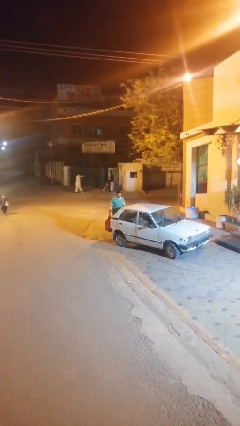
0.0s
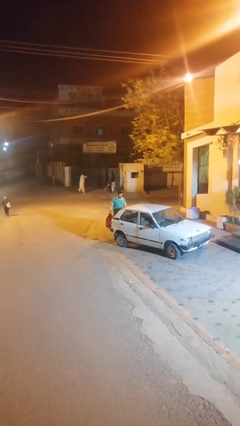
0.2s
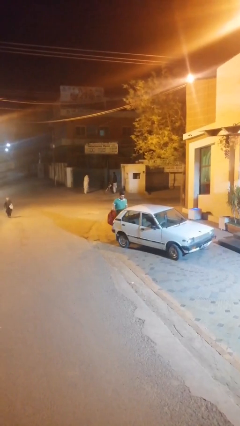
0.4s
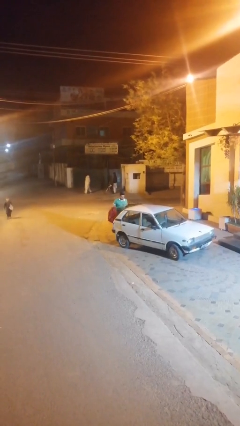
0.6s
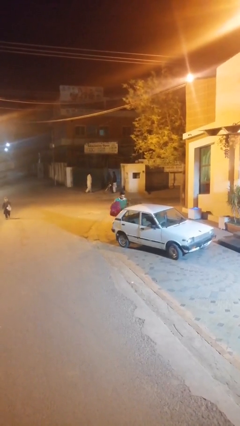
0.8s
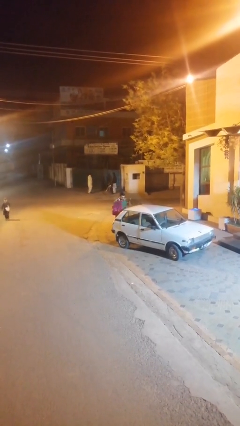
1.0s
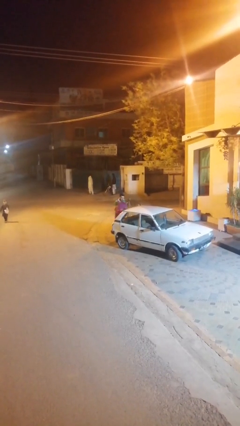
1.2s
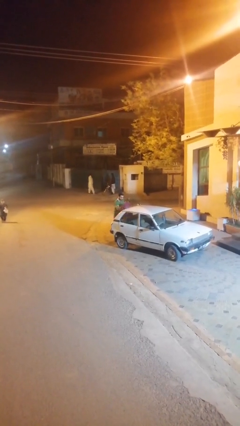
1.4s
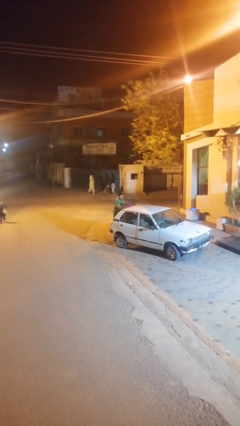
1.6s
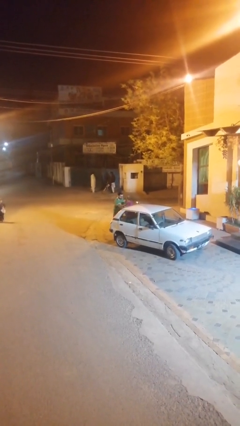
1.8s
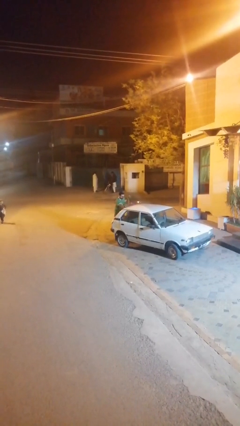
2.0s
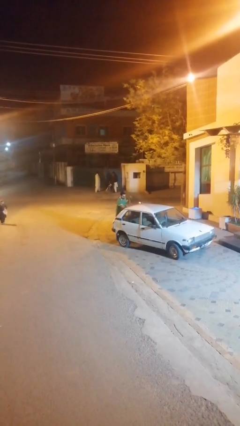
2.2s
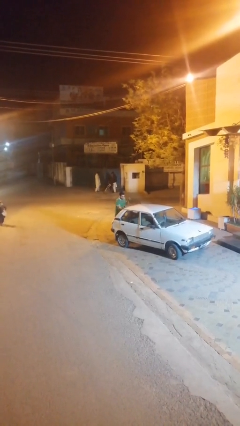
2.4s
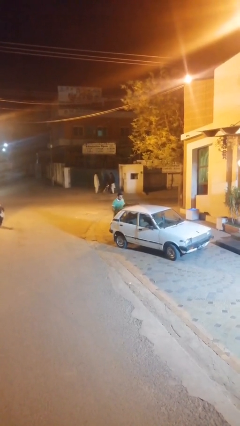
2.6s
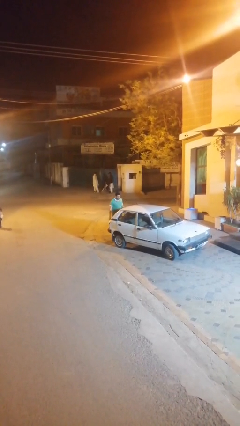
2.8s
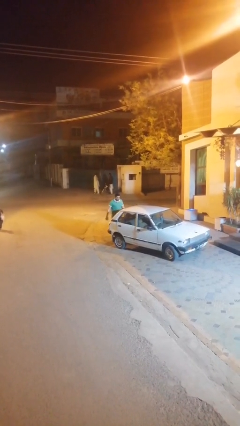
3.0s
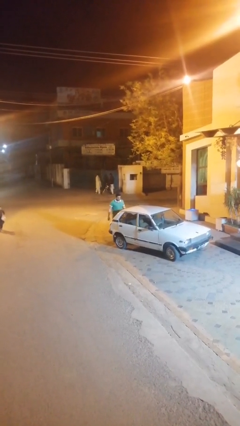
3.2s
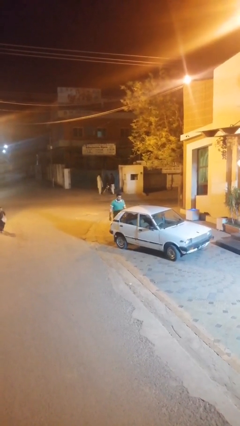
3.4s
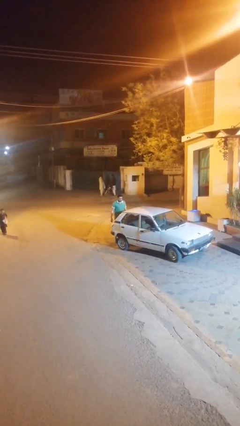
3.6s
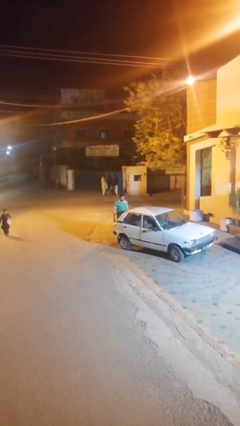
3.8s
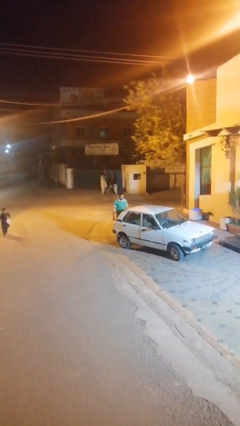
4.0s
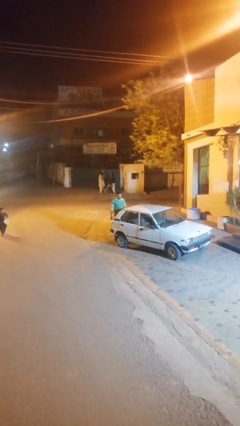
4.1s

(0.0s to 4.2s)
person loads car

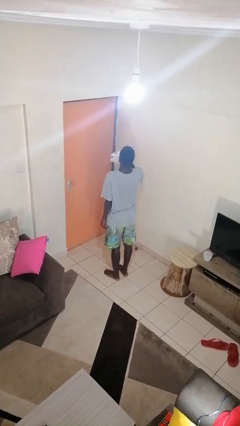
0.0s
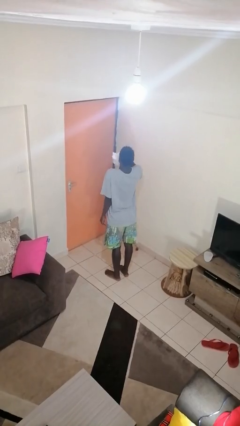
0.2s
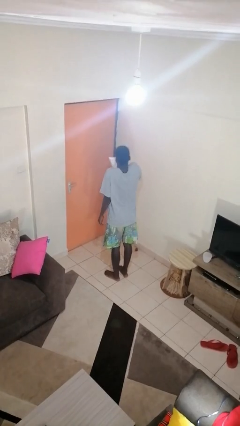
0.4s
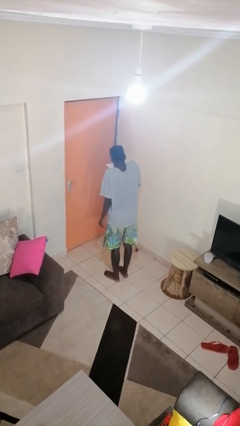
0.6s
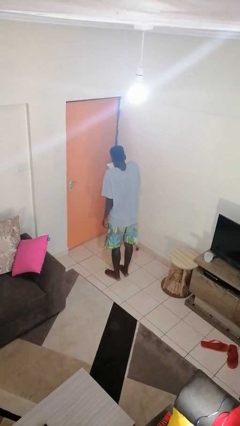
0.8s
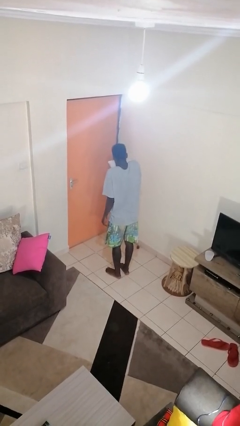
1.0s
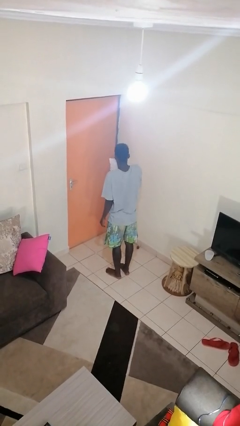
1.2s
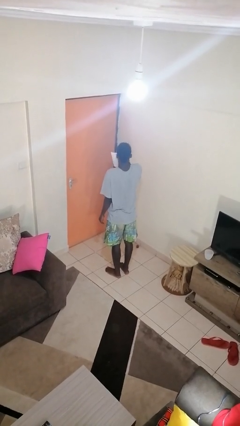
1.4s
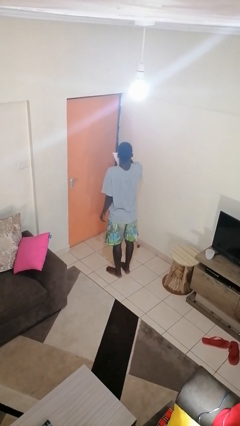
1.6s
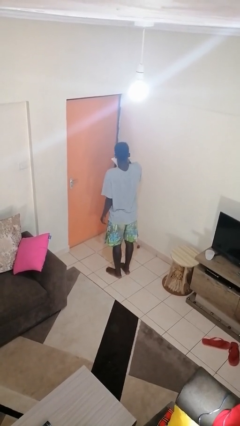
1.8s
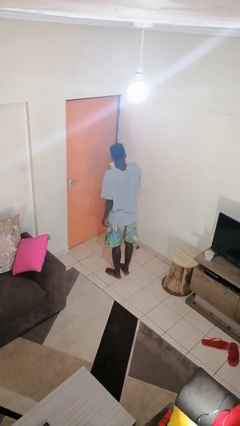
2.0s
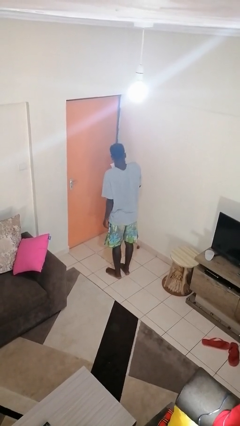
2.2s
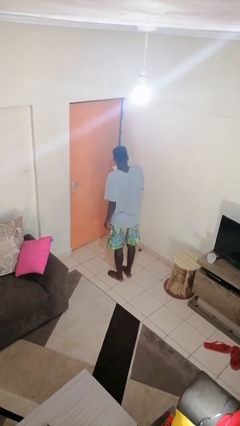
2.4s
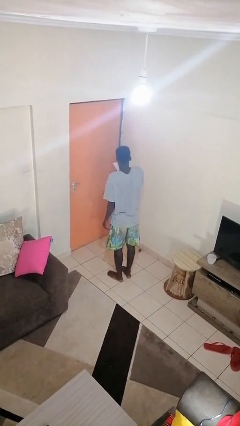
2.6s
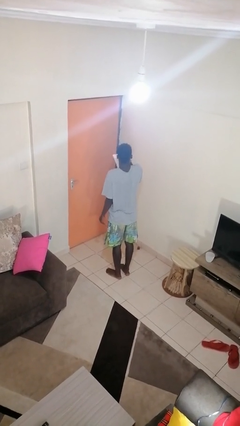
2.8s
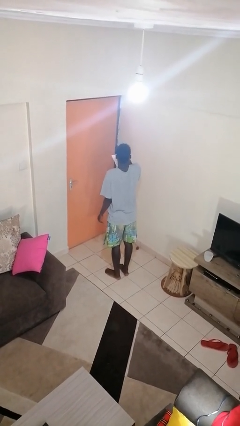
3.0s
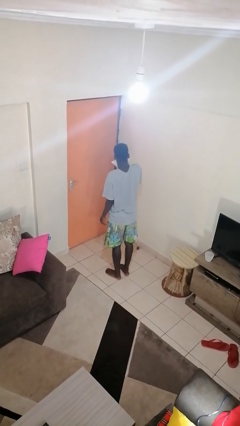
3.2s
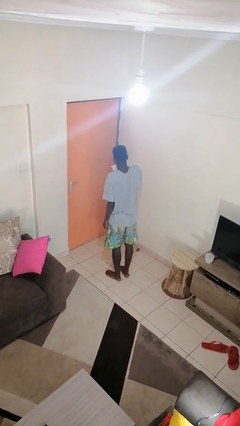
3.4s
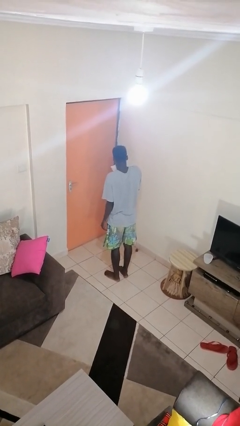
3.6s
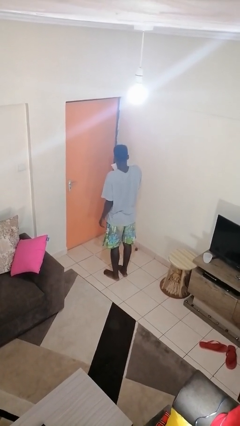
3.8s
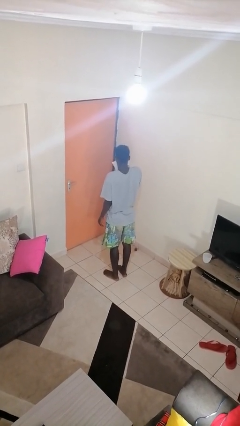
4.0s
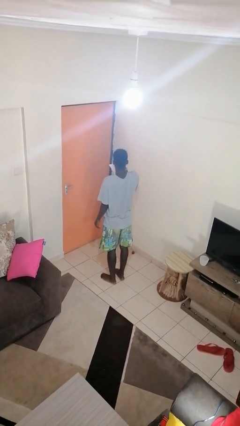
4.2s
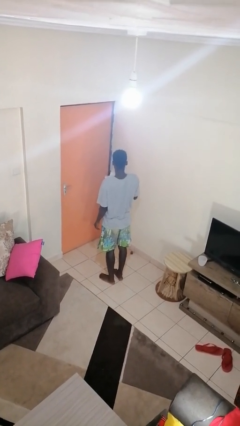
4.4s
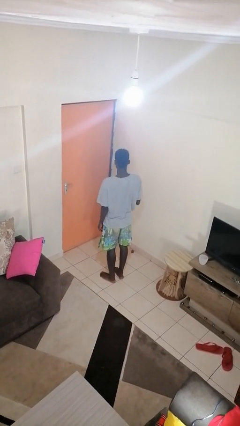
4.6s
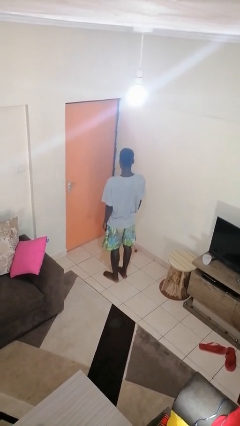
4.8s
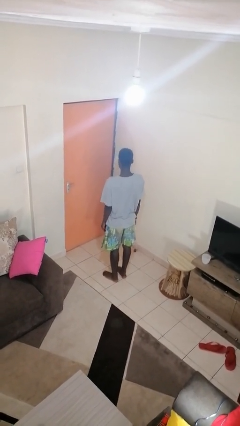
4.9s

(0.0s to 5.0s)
person blows nose

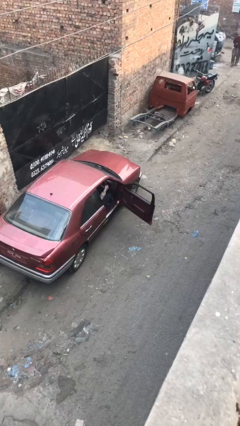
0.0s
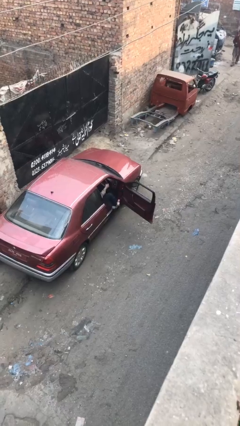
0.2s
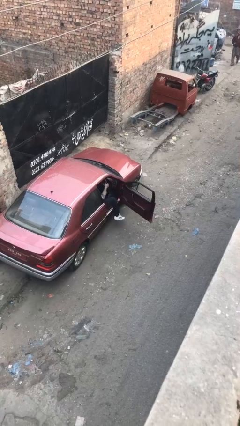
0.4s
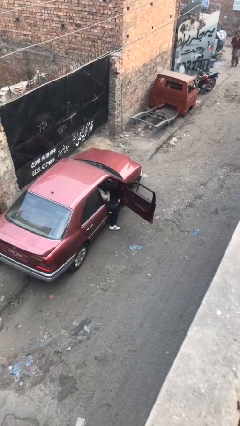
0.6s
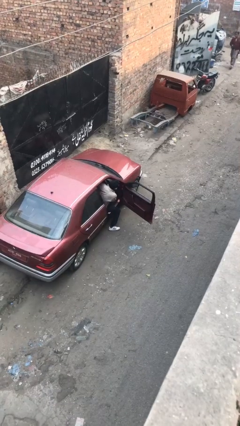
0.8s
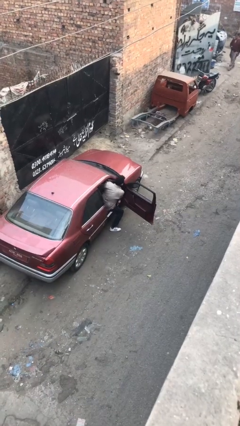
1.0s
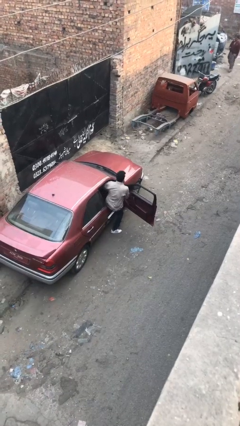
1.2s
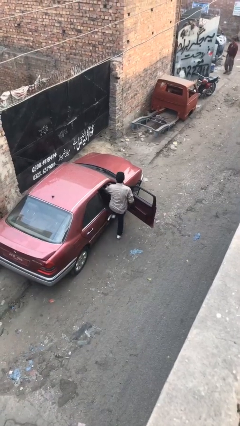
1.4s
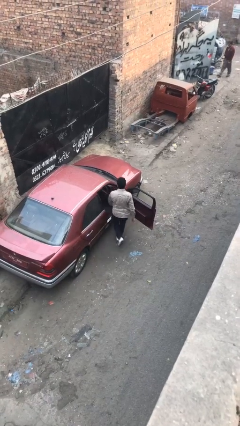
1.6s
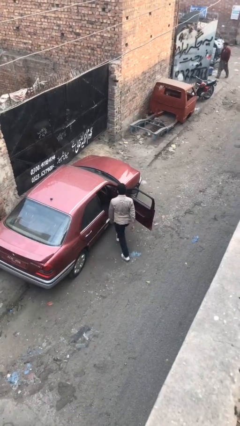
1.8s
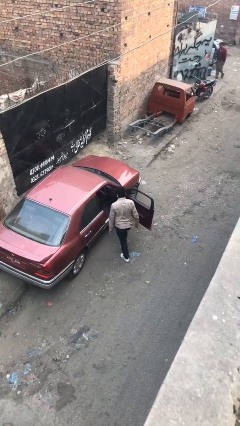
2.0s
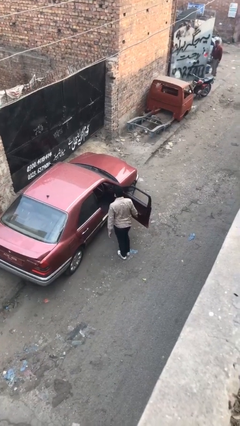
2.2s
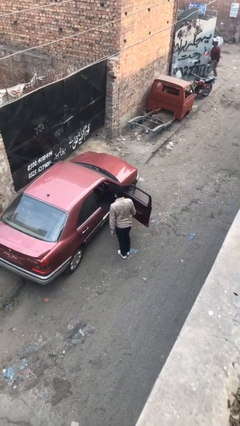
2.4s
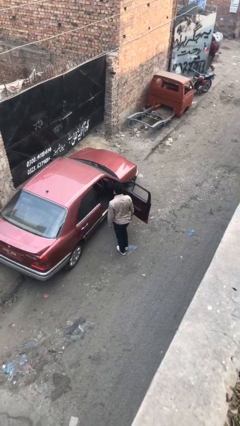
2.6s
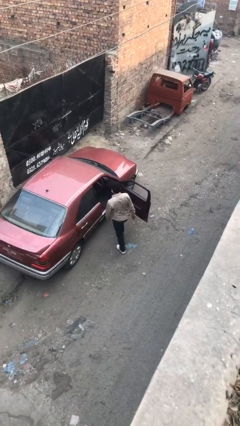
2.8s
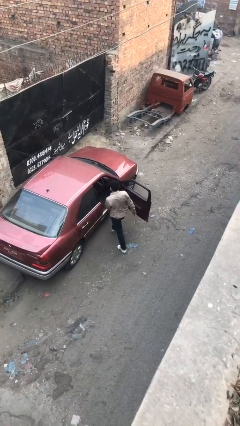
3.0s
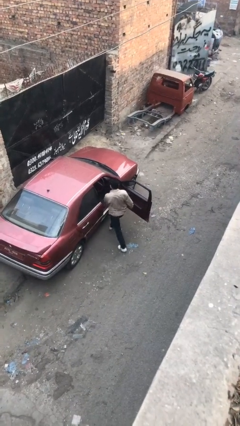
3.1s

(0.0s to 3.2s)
person exits car

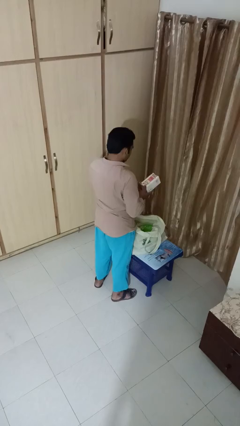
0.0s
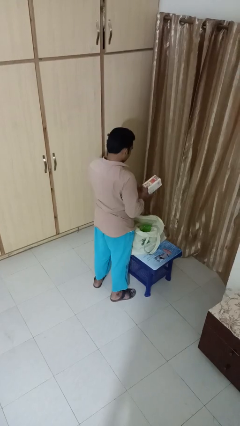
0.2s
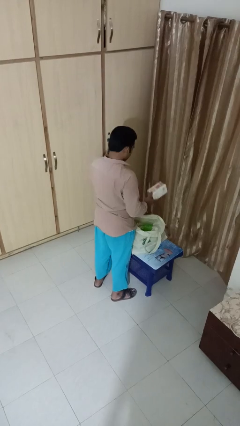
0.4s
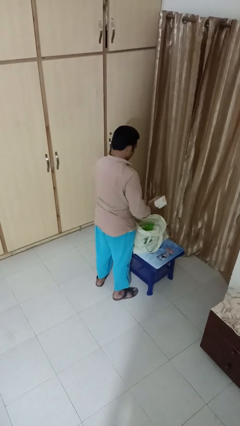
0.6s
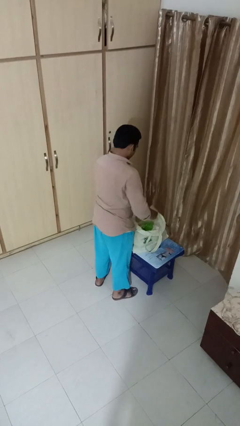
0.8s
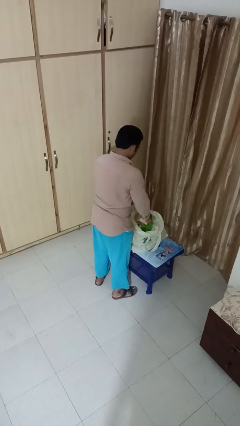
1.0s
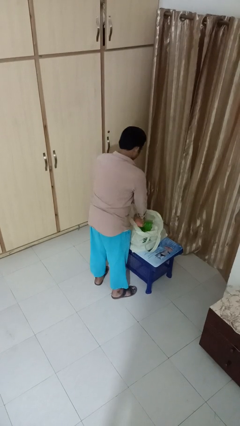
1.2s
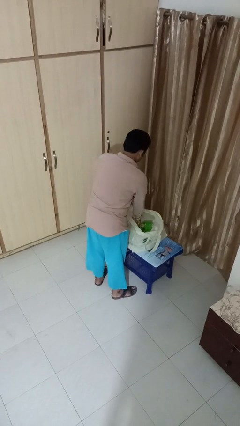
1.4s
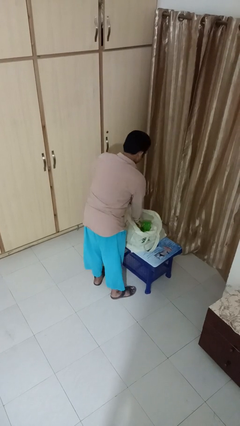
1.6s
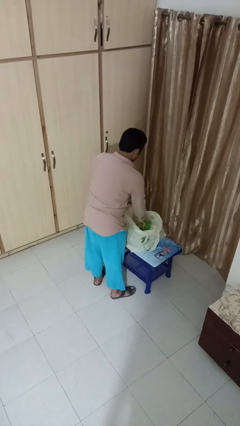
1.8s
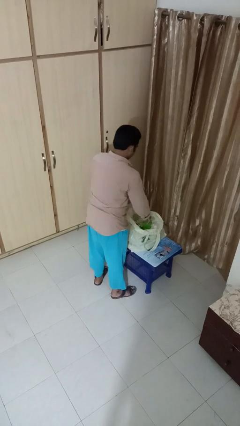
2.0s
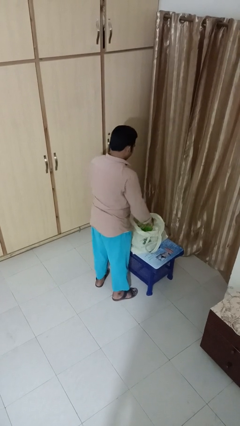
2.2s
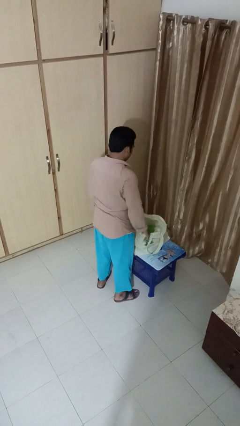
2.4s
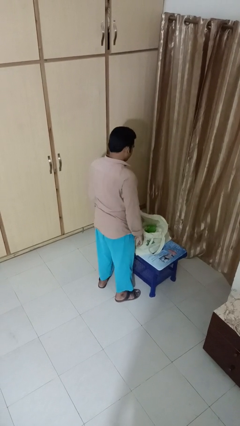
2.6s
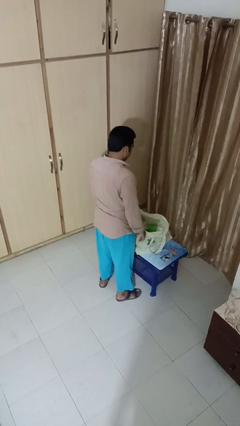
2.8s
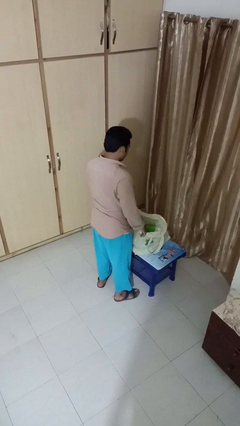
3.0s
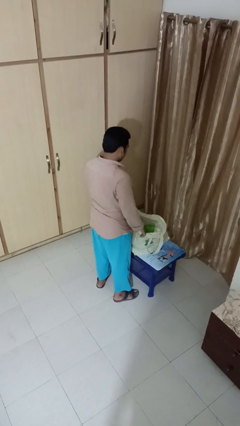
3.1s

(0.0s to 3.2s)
person puts object into bag

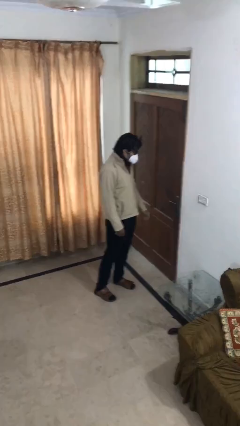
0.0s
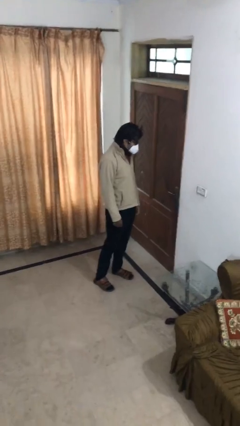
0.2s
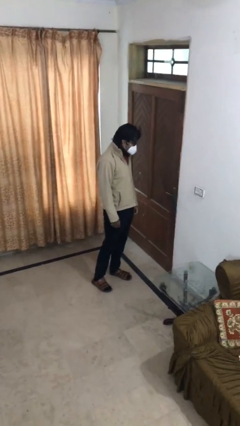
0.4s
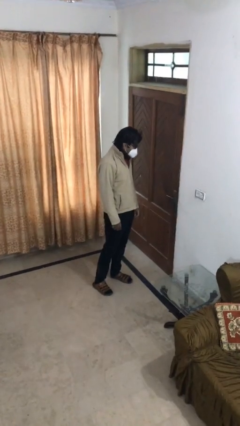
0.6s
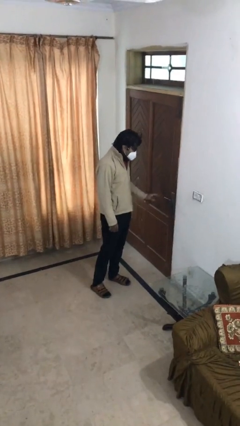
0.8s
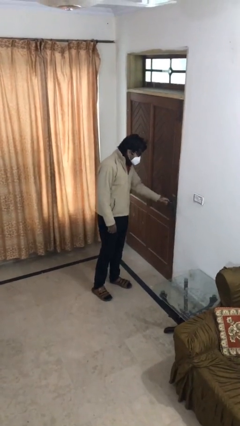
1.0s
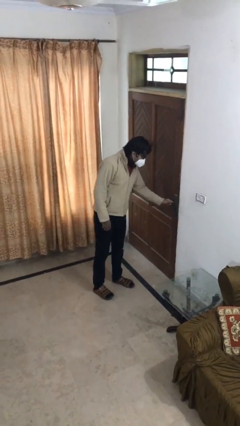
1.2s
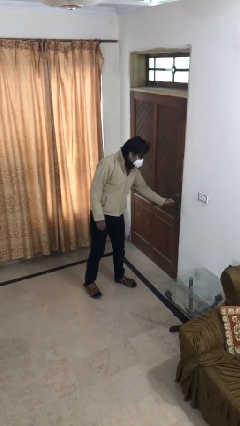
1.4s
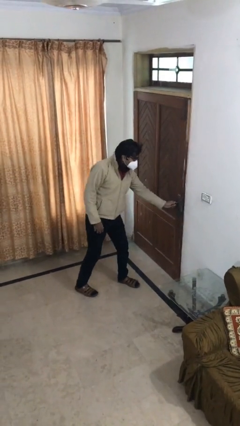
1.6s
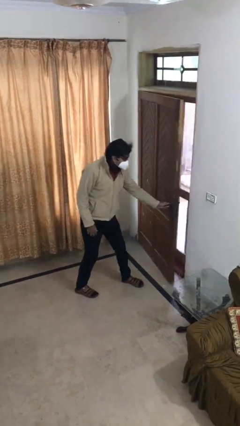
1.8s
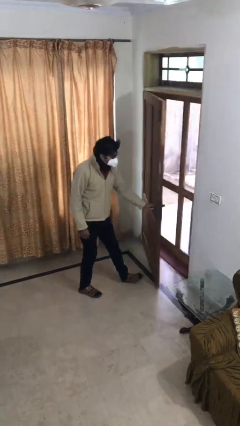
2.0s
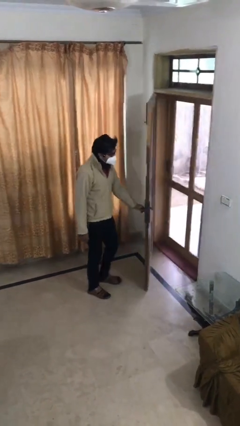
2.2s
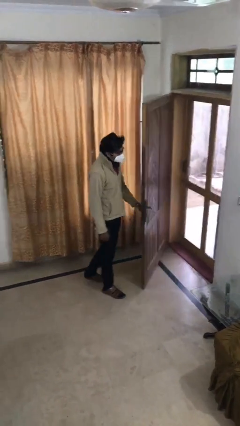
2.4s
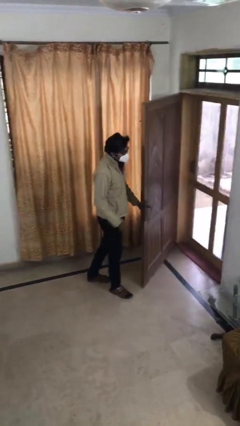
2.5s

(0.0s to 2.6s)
person opens facility door
